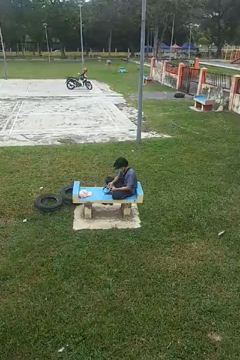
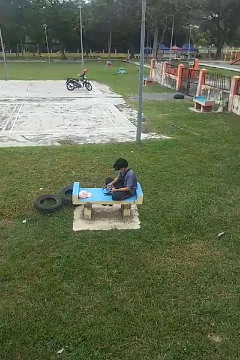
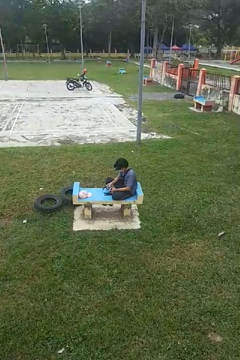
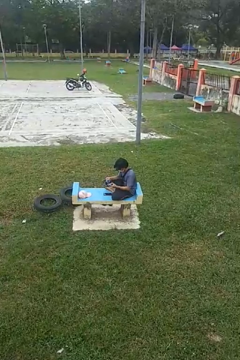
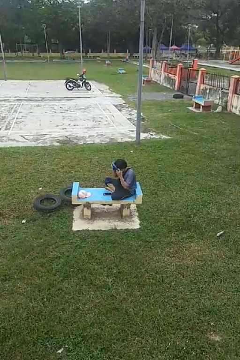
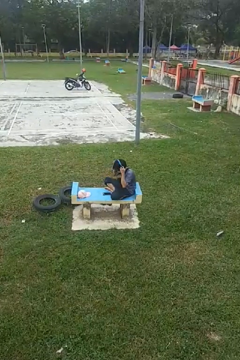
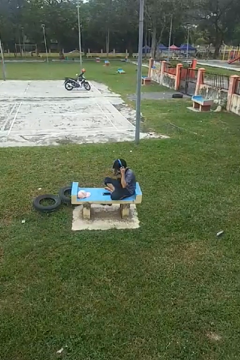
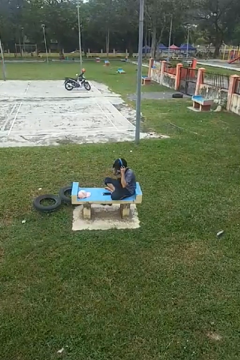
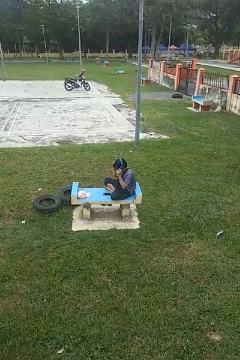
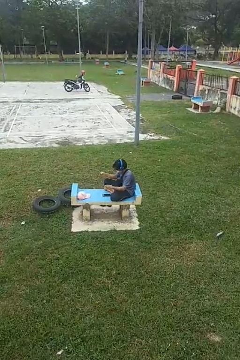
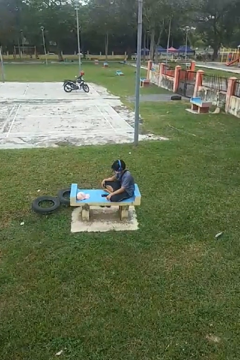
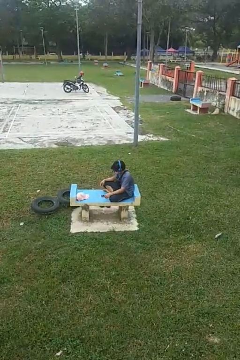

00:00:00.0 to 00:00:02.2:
person puts on headphones

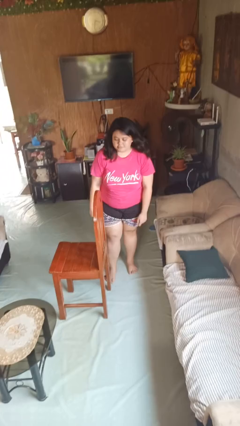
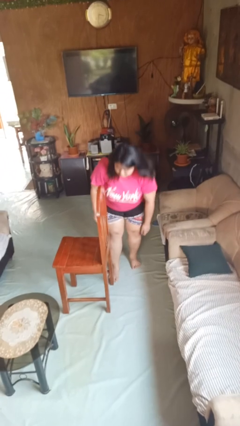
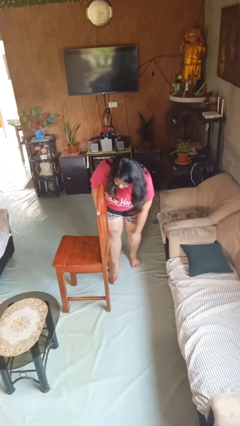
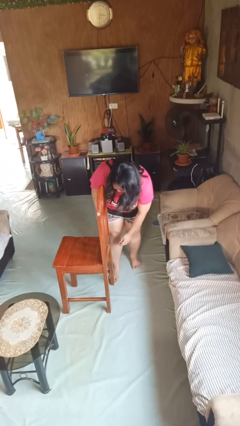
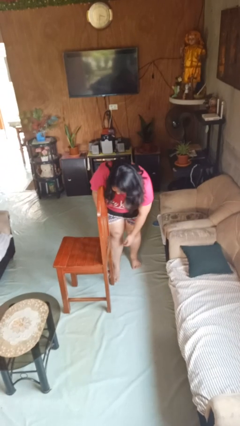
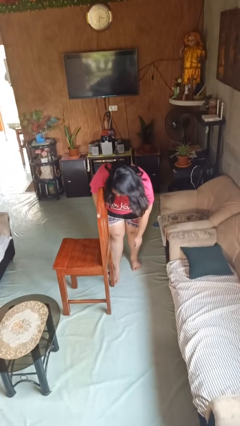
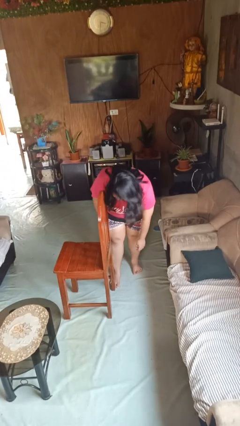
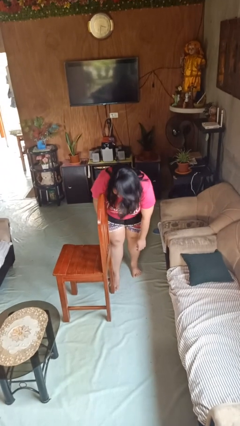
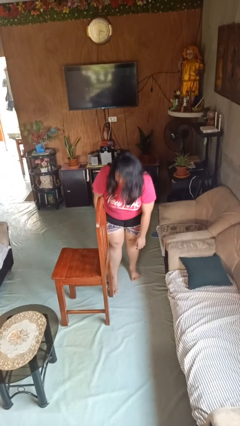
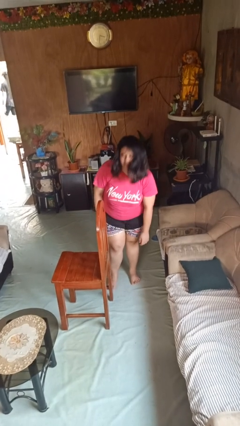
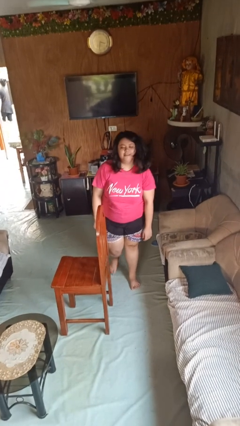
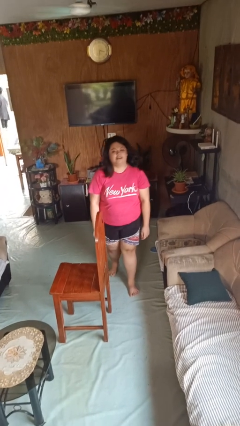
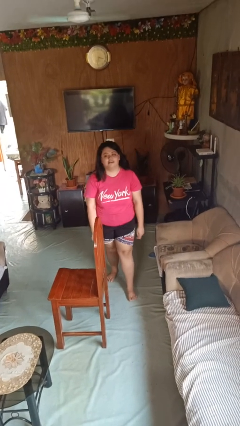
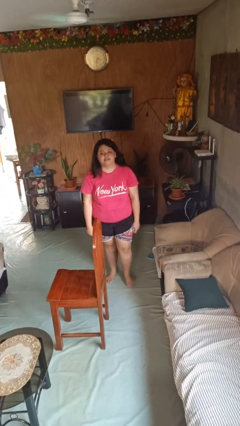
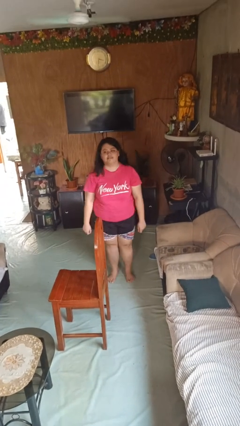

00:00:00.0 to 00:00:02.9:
person stubs toe

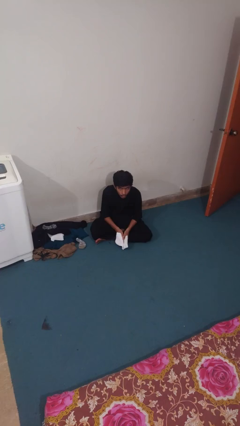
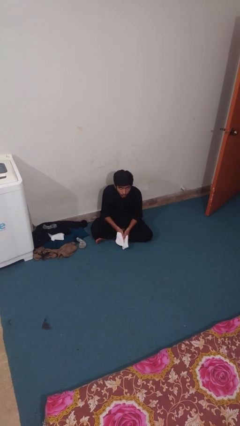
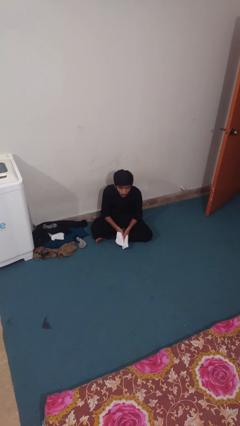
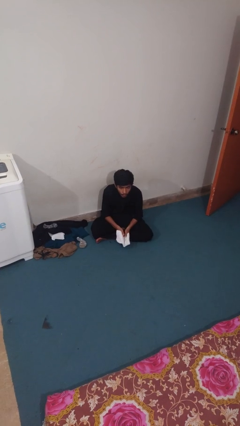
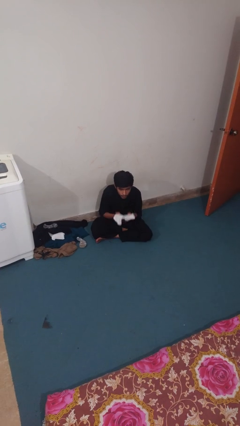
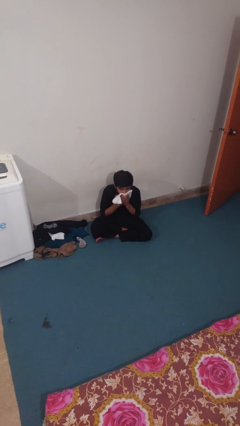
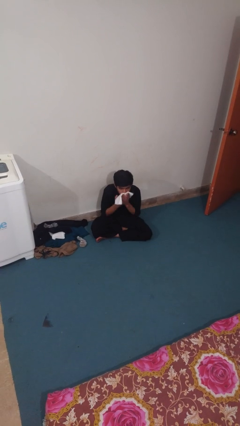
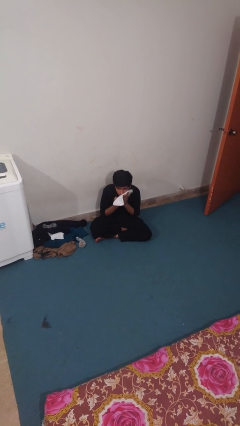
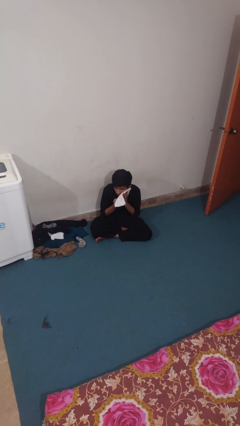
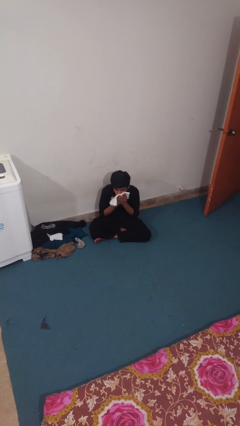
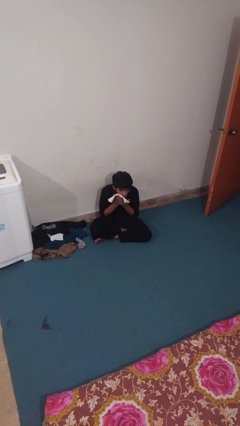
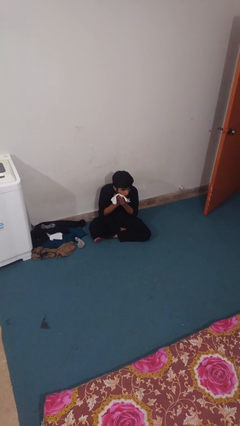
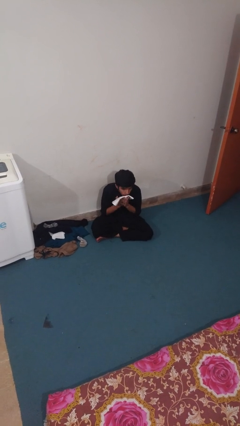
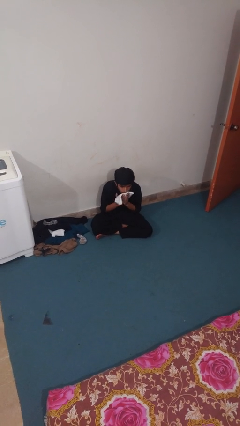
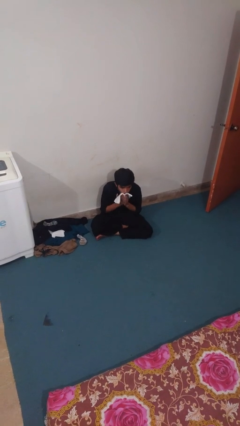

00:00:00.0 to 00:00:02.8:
person wipes mouth with napkin

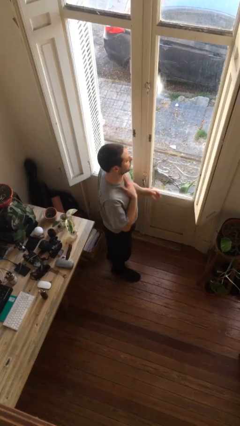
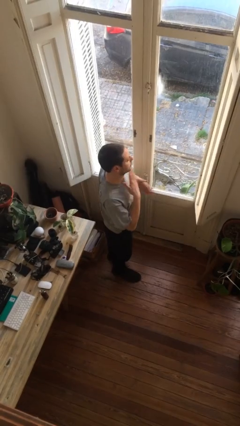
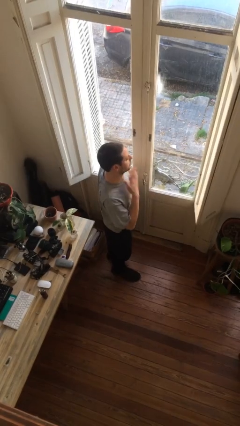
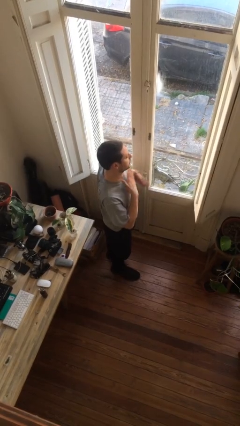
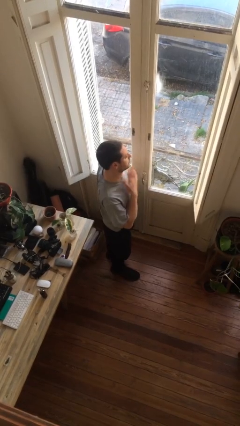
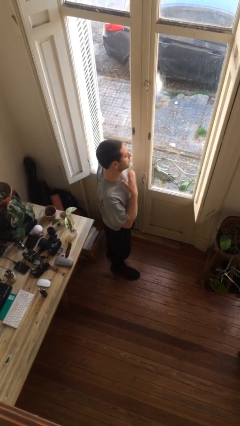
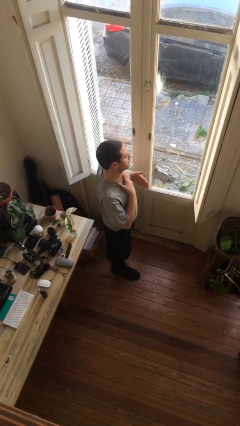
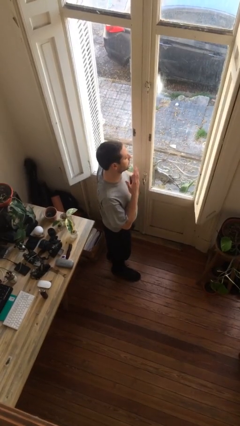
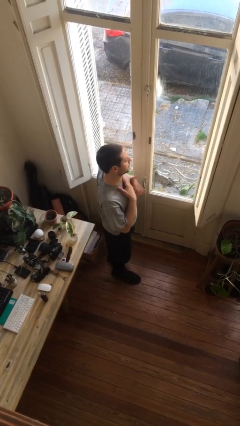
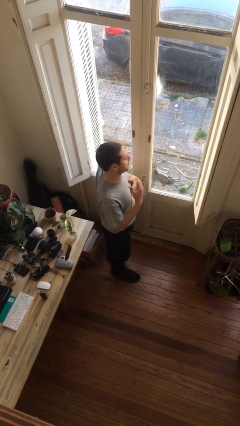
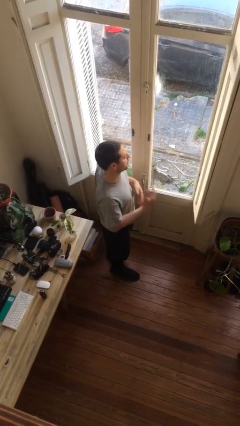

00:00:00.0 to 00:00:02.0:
person drums on chest

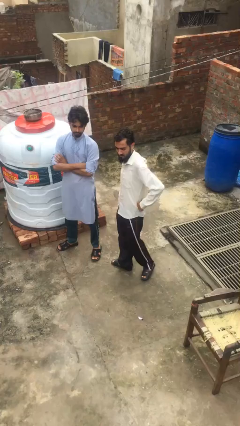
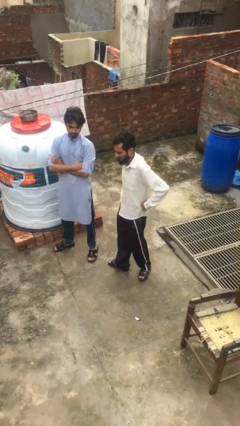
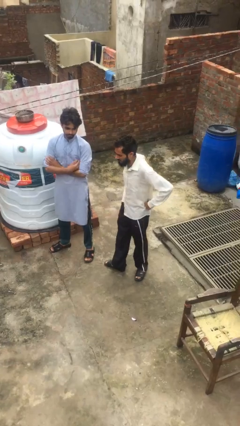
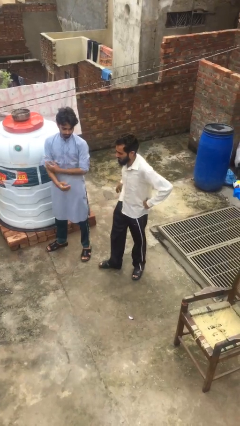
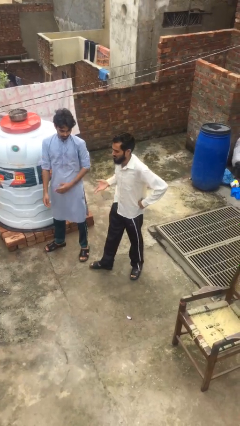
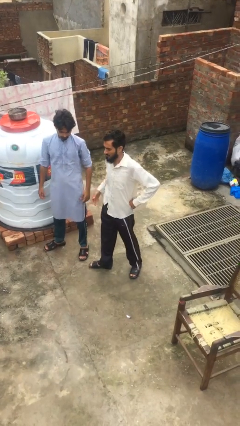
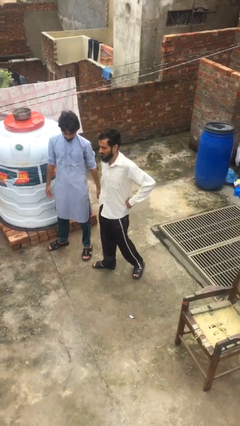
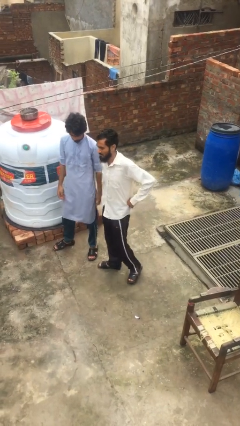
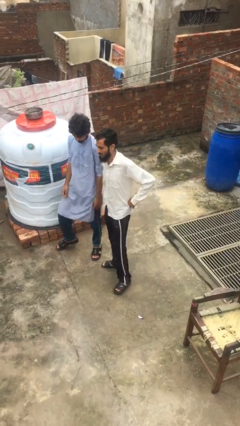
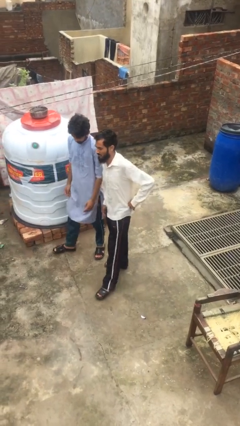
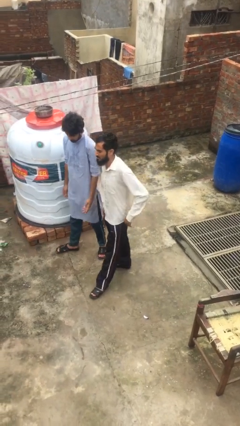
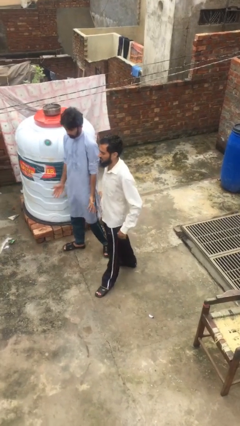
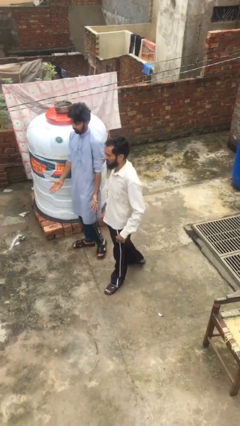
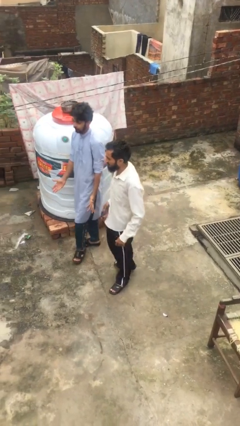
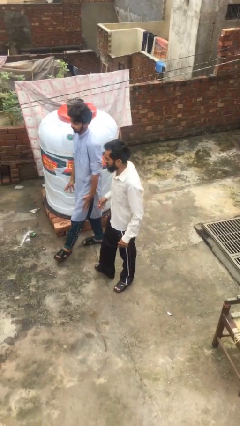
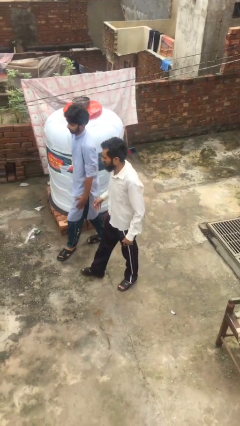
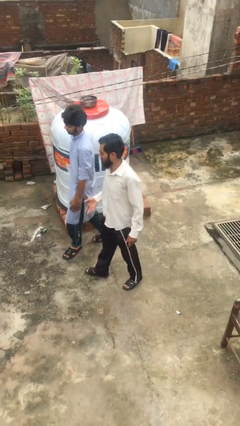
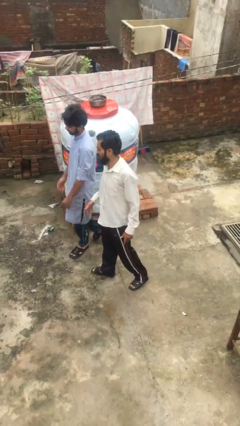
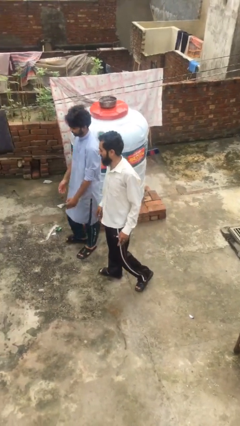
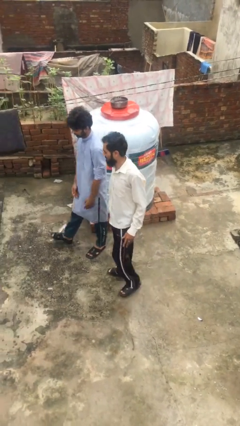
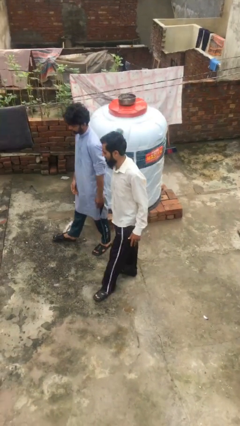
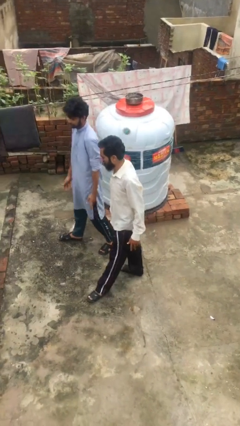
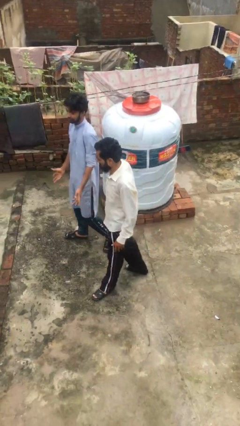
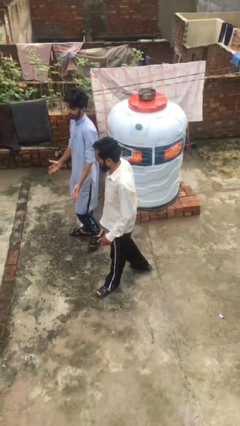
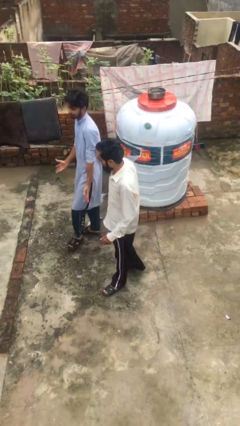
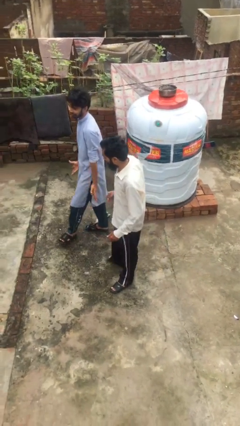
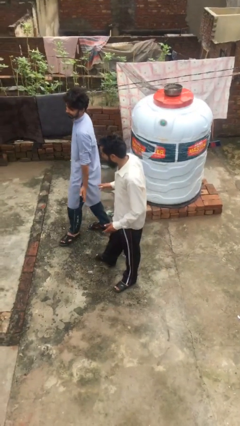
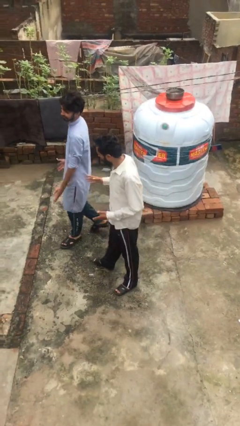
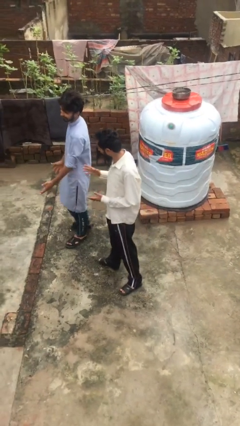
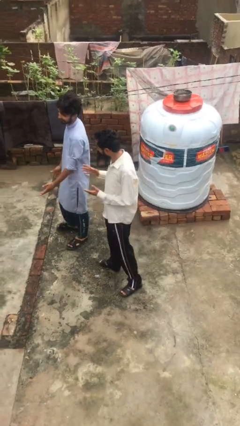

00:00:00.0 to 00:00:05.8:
person talks to person

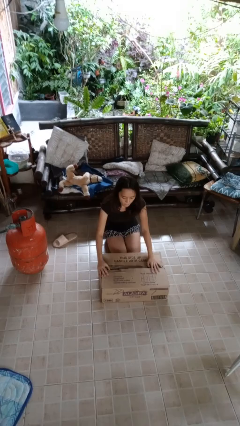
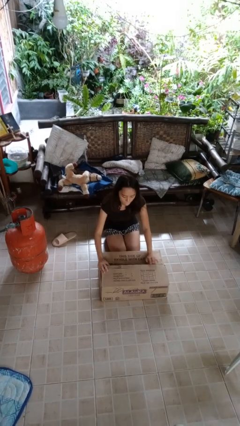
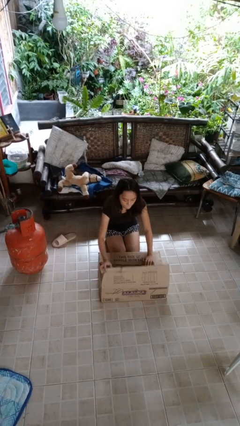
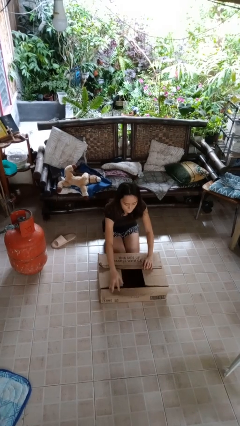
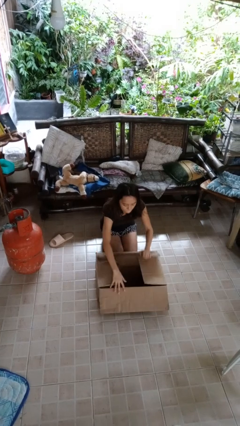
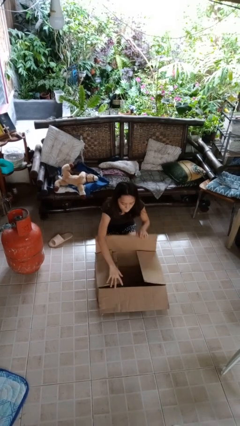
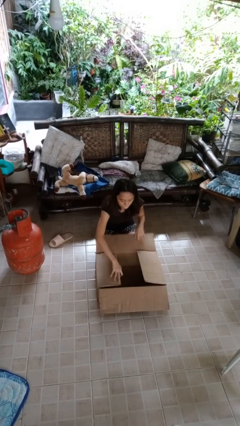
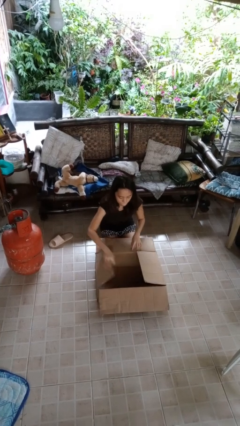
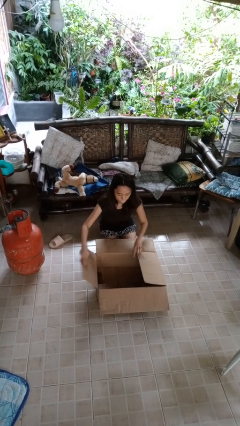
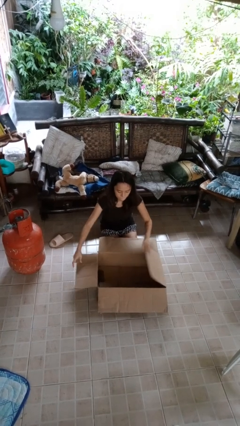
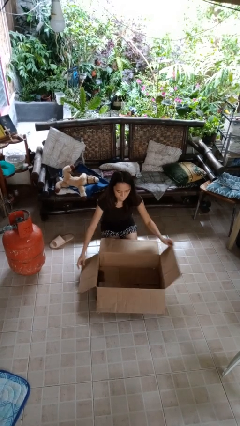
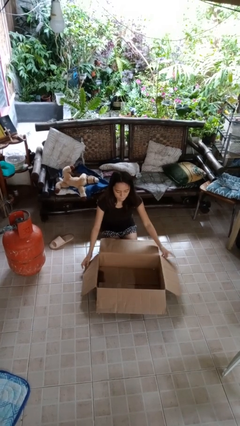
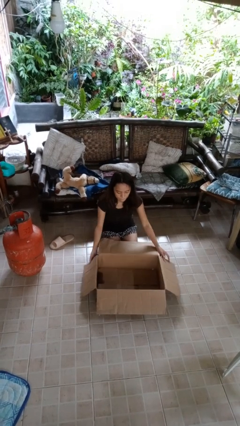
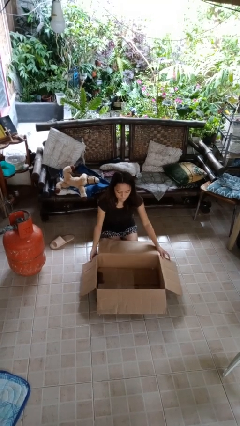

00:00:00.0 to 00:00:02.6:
person opens box

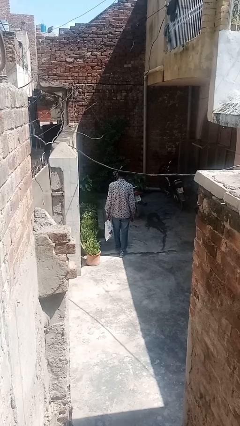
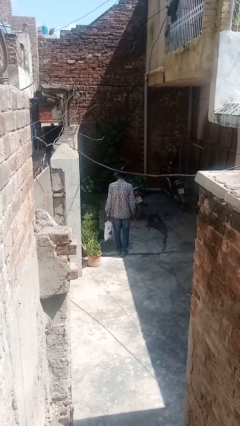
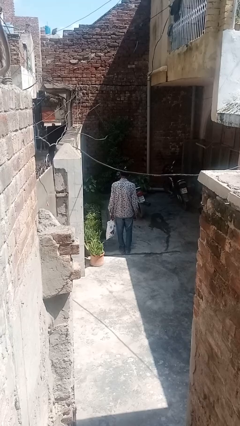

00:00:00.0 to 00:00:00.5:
person carries groceries
